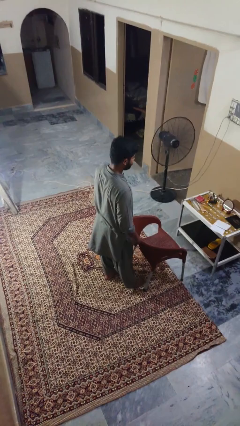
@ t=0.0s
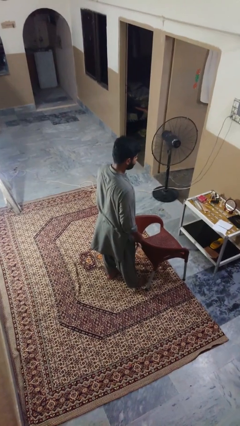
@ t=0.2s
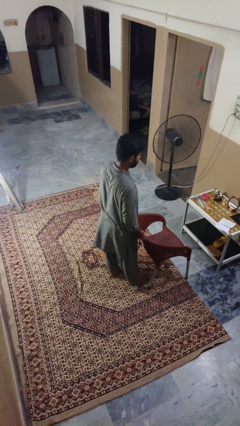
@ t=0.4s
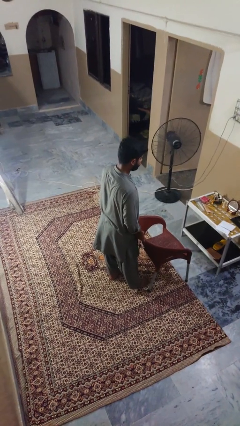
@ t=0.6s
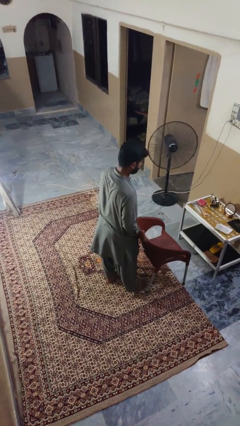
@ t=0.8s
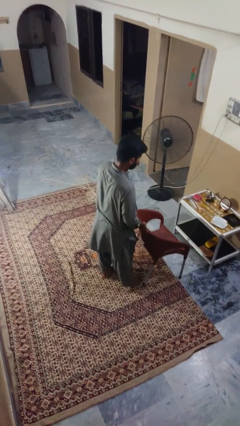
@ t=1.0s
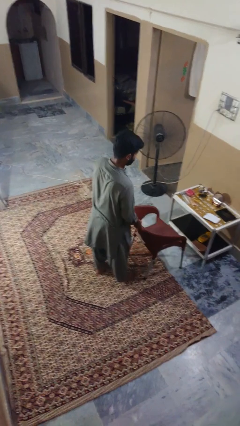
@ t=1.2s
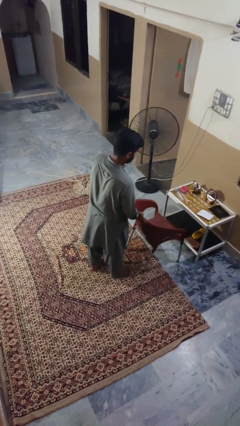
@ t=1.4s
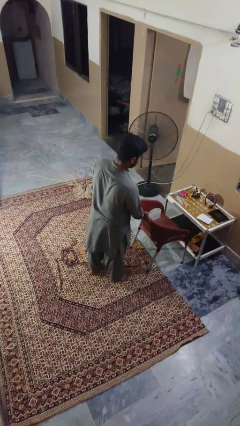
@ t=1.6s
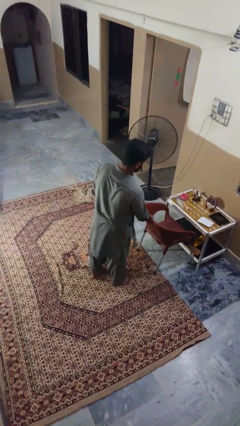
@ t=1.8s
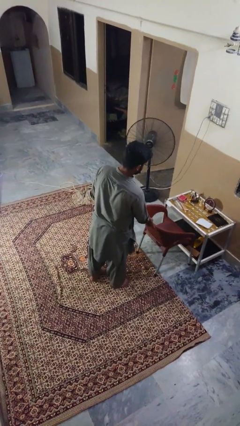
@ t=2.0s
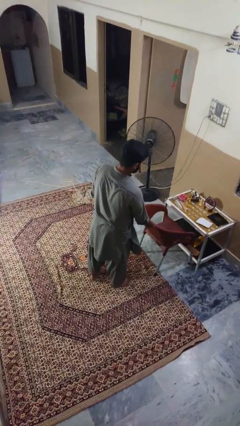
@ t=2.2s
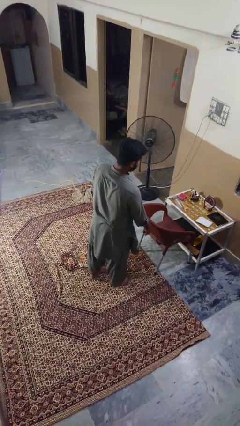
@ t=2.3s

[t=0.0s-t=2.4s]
person pushes in chair

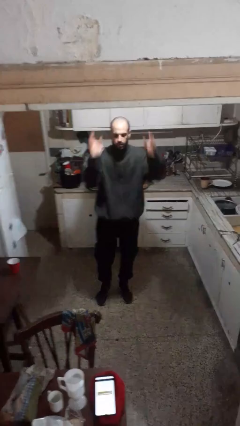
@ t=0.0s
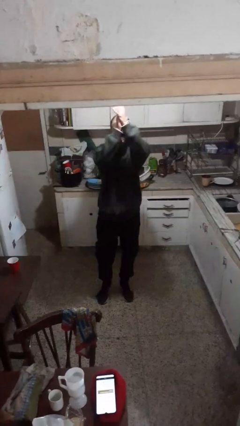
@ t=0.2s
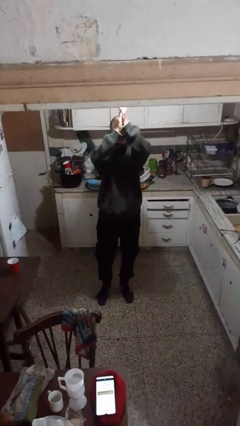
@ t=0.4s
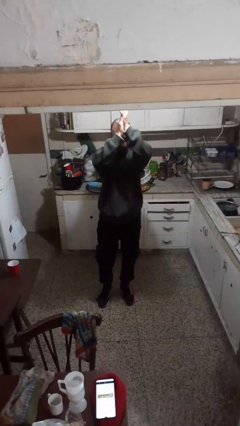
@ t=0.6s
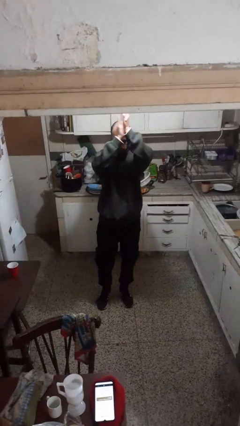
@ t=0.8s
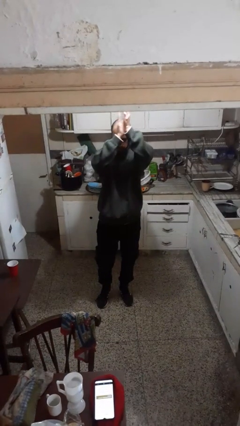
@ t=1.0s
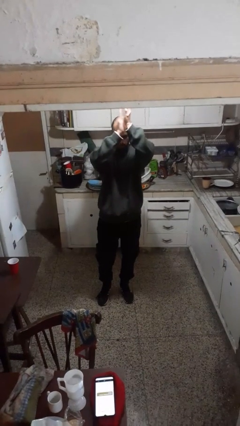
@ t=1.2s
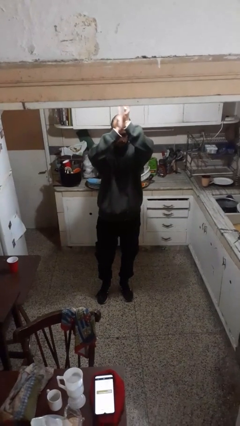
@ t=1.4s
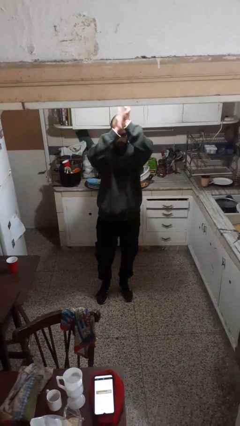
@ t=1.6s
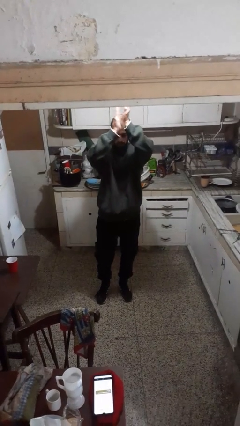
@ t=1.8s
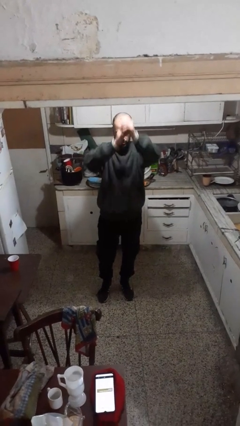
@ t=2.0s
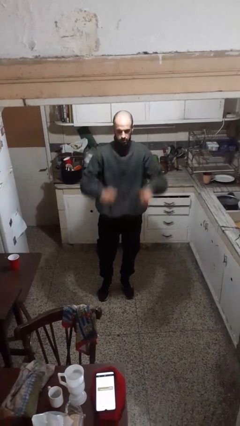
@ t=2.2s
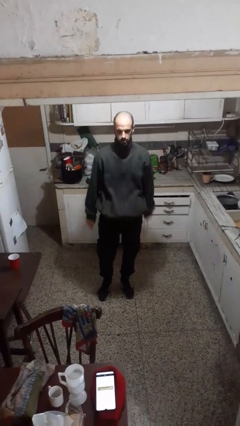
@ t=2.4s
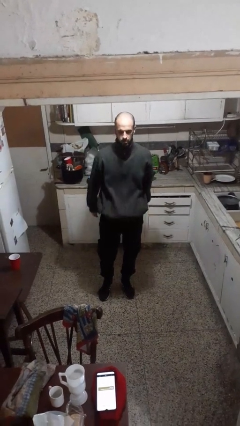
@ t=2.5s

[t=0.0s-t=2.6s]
person claps hands

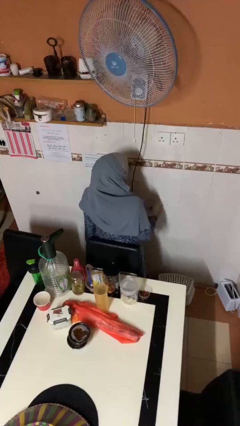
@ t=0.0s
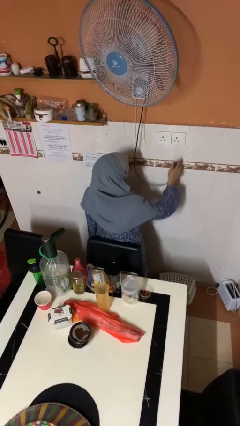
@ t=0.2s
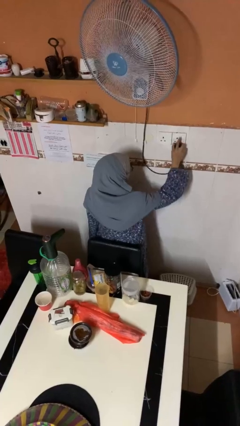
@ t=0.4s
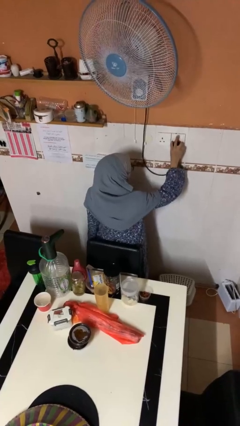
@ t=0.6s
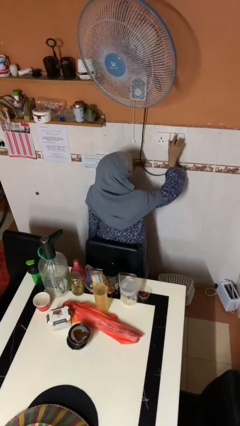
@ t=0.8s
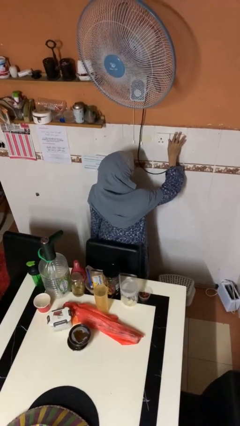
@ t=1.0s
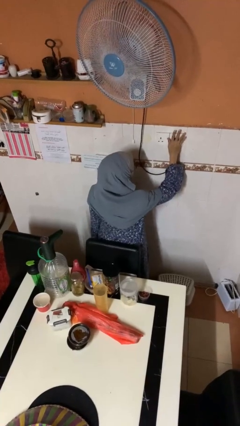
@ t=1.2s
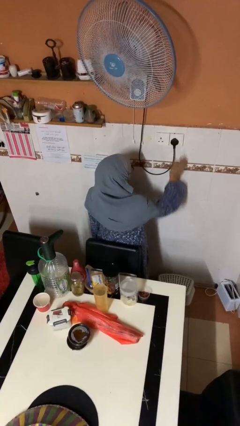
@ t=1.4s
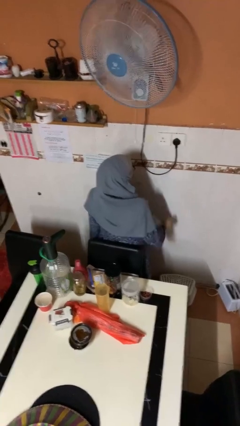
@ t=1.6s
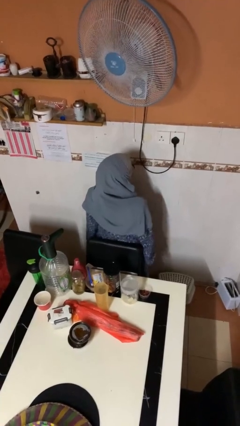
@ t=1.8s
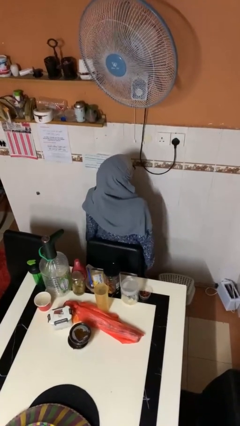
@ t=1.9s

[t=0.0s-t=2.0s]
person plugs into electrical socket

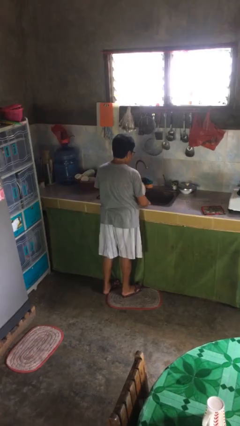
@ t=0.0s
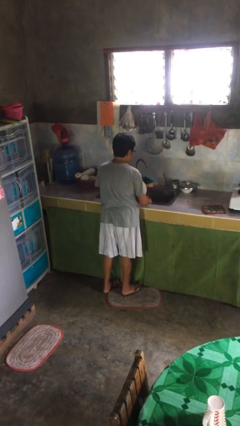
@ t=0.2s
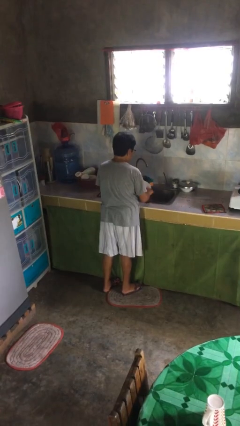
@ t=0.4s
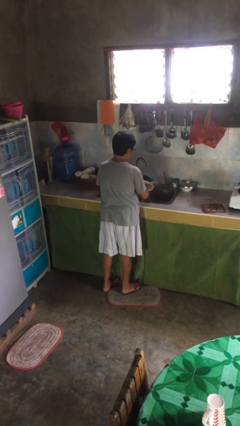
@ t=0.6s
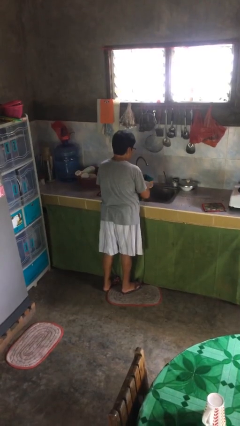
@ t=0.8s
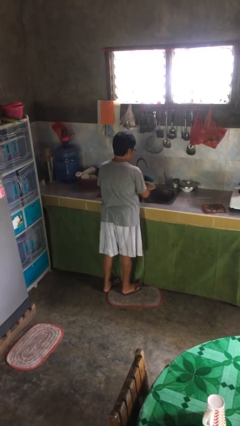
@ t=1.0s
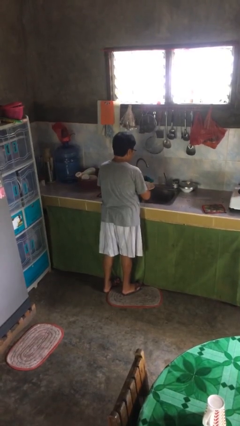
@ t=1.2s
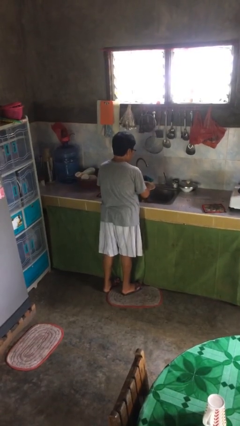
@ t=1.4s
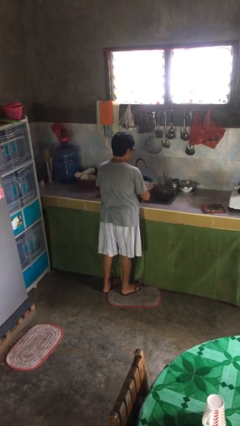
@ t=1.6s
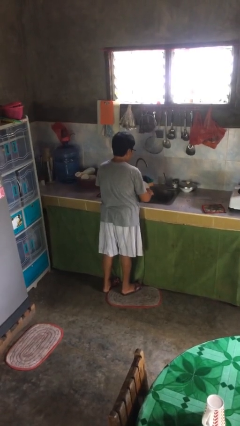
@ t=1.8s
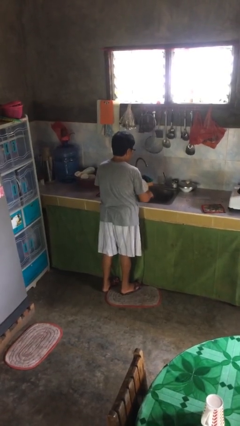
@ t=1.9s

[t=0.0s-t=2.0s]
person washes dish

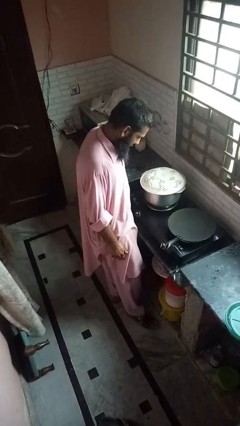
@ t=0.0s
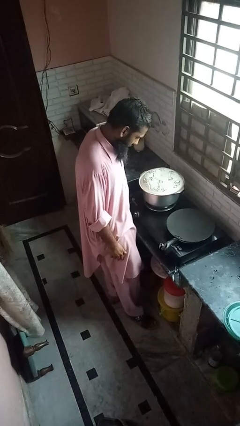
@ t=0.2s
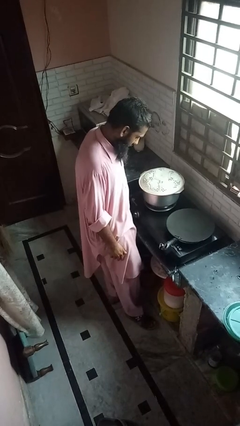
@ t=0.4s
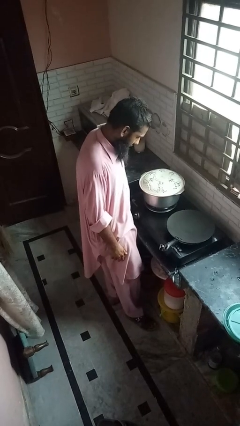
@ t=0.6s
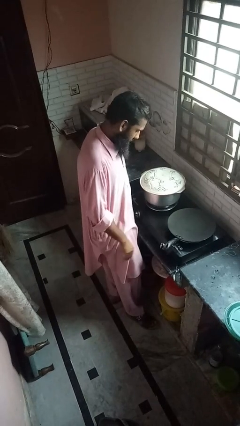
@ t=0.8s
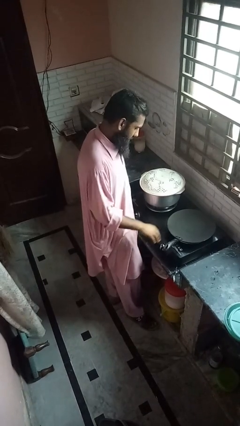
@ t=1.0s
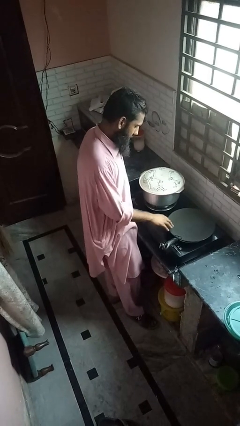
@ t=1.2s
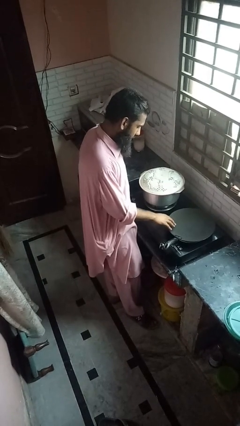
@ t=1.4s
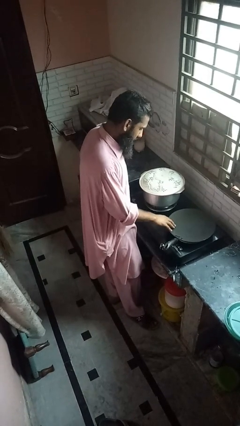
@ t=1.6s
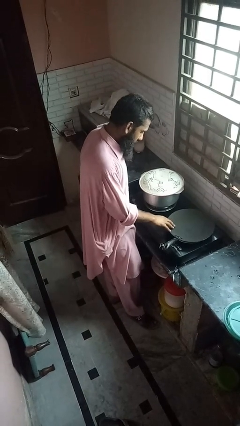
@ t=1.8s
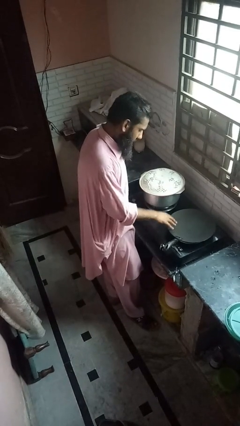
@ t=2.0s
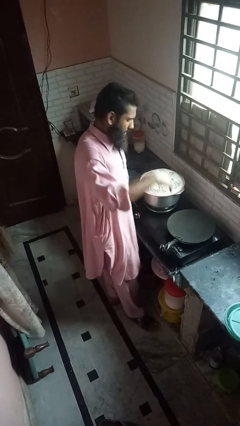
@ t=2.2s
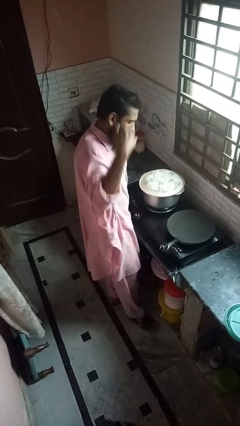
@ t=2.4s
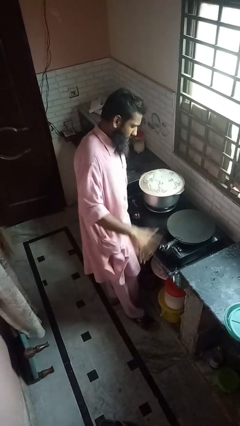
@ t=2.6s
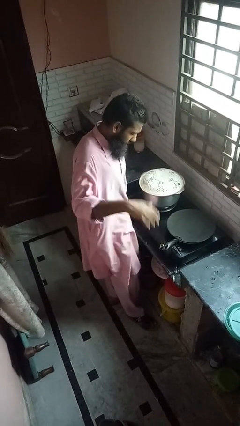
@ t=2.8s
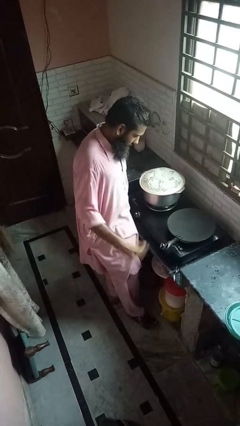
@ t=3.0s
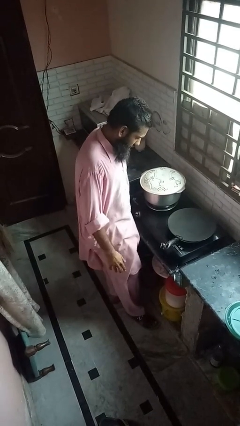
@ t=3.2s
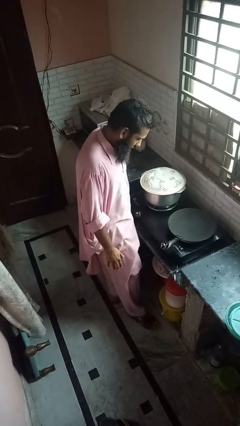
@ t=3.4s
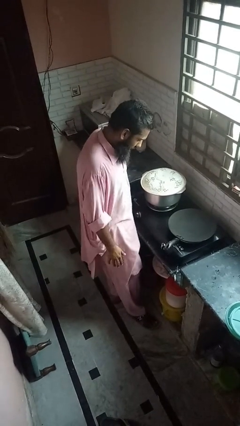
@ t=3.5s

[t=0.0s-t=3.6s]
person burns hand

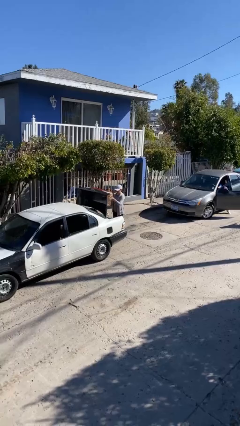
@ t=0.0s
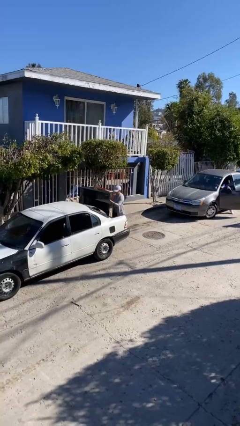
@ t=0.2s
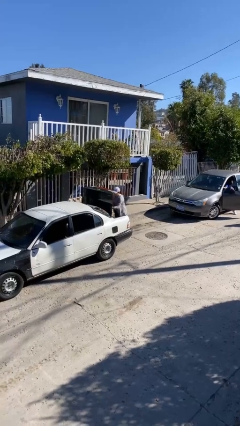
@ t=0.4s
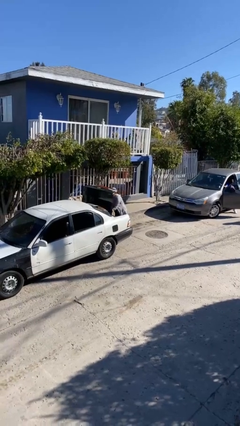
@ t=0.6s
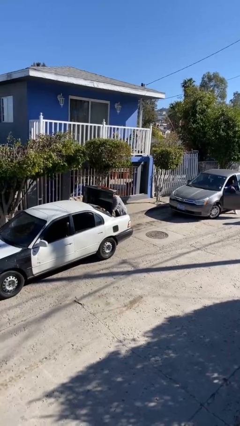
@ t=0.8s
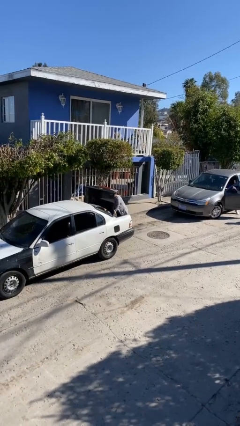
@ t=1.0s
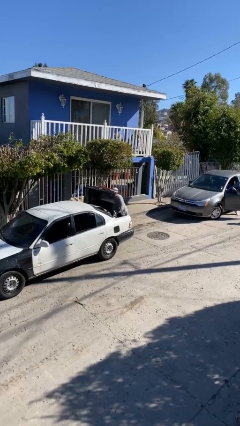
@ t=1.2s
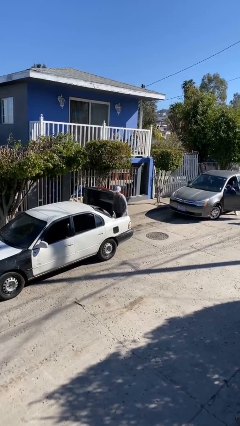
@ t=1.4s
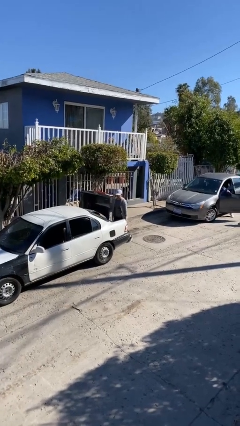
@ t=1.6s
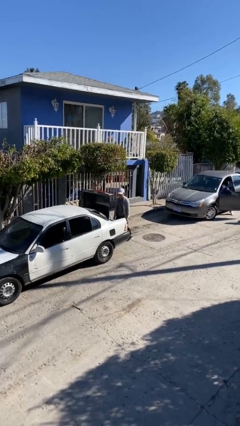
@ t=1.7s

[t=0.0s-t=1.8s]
person loads car

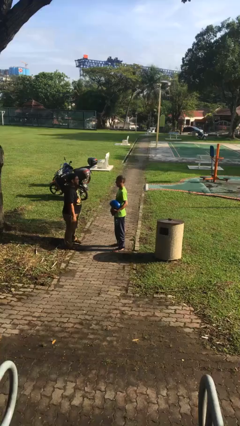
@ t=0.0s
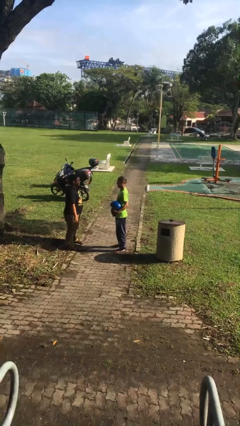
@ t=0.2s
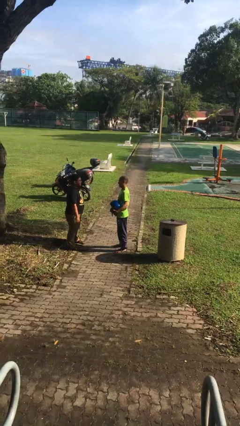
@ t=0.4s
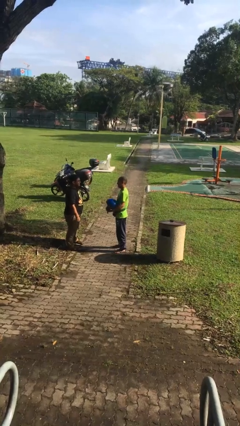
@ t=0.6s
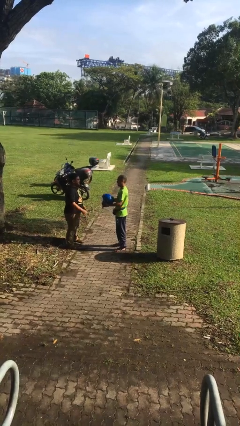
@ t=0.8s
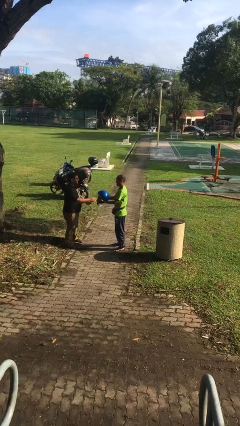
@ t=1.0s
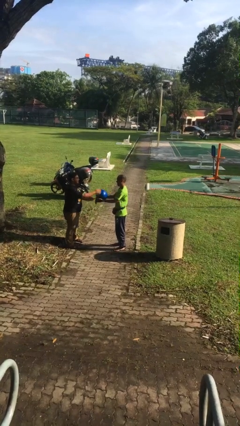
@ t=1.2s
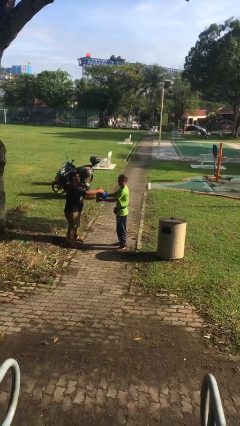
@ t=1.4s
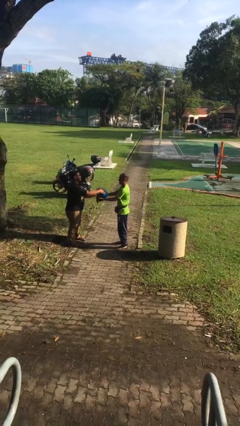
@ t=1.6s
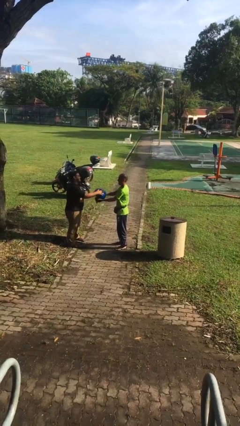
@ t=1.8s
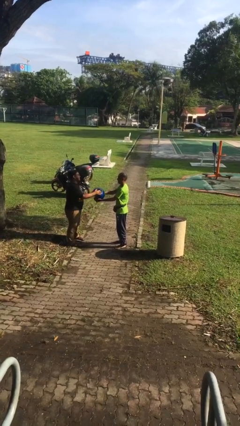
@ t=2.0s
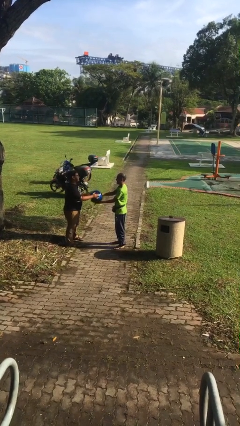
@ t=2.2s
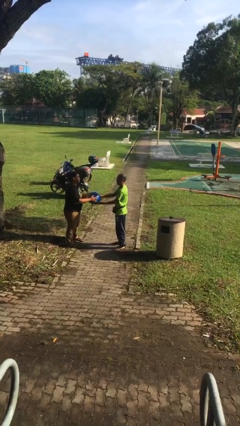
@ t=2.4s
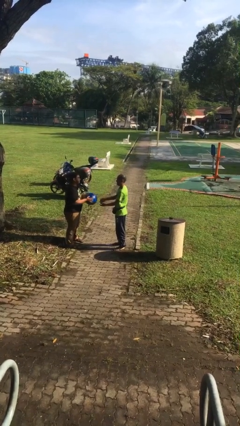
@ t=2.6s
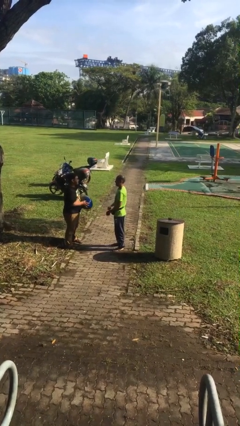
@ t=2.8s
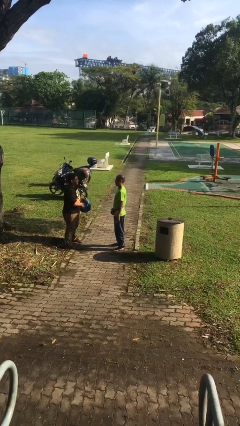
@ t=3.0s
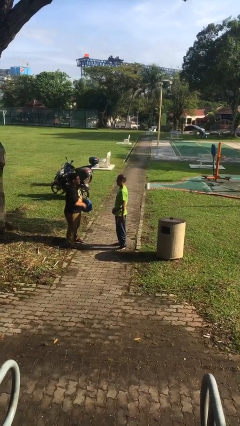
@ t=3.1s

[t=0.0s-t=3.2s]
person transfers object to person
